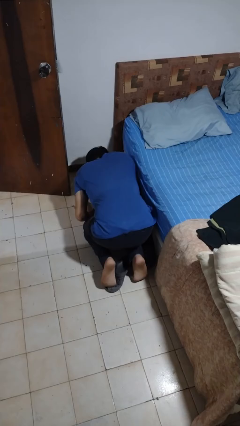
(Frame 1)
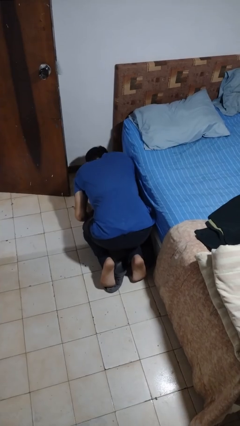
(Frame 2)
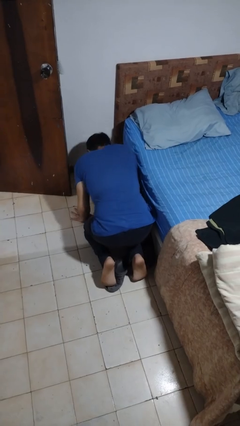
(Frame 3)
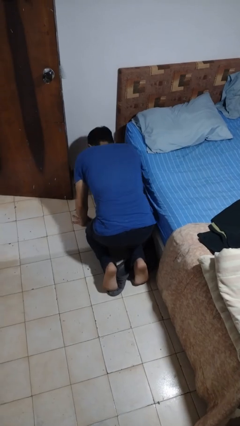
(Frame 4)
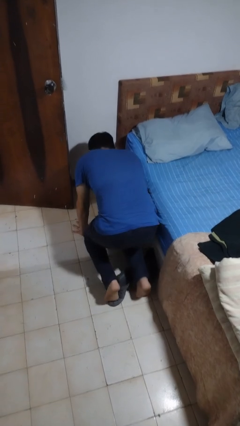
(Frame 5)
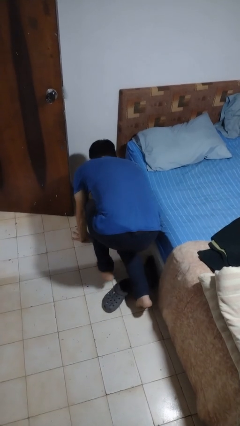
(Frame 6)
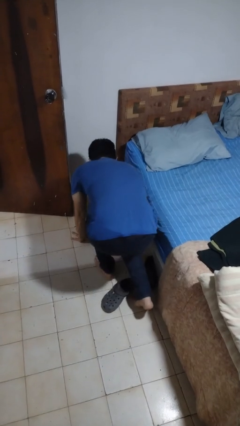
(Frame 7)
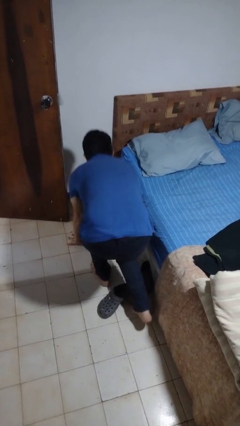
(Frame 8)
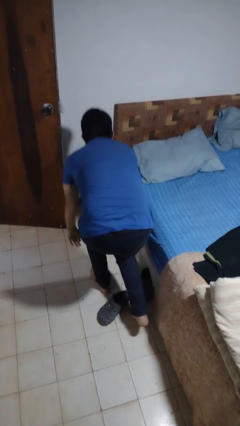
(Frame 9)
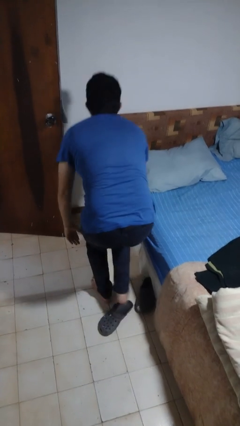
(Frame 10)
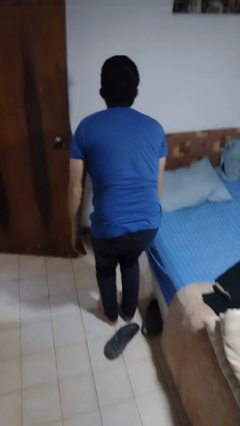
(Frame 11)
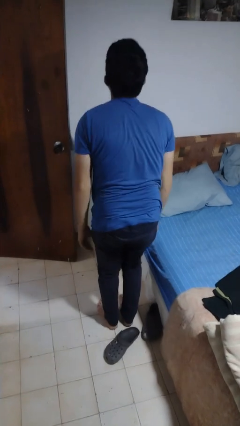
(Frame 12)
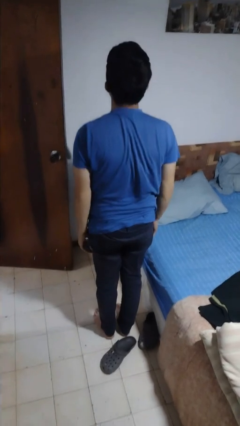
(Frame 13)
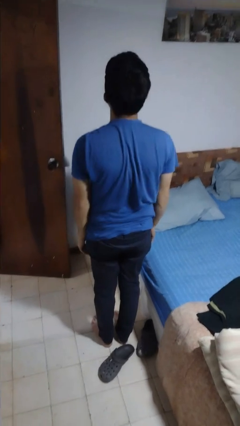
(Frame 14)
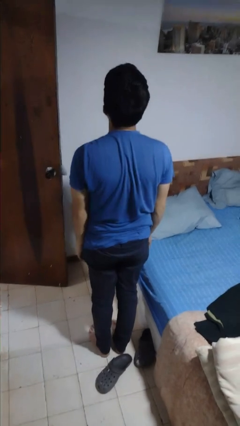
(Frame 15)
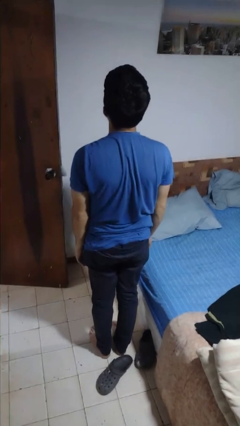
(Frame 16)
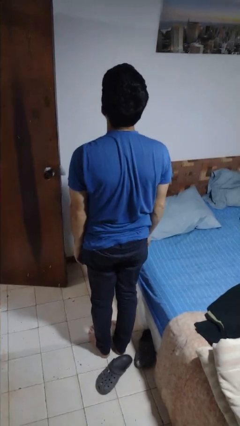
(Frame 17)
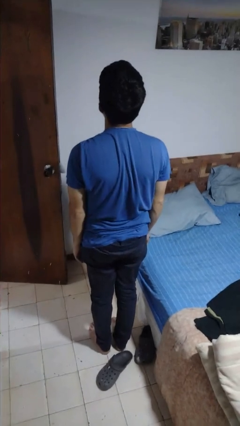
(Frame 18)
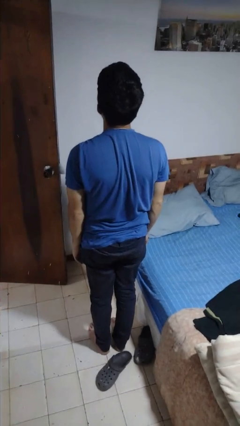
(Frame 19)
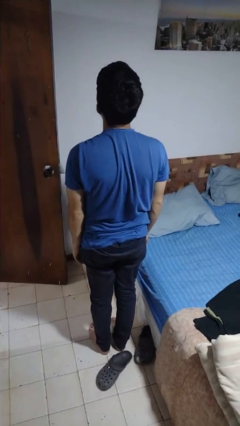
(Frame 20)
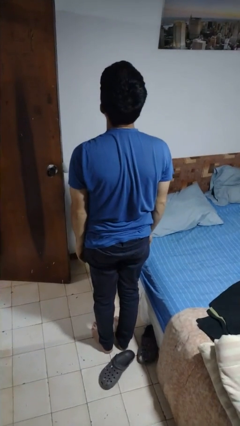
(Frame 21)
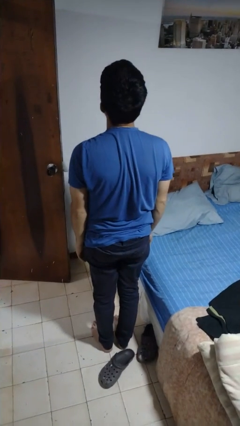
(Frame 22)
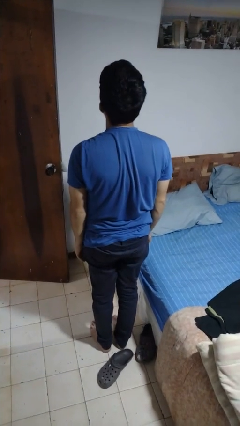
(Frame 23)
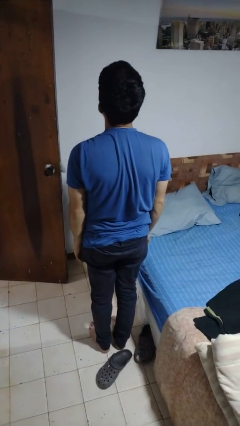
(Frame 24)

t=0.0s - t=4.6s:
person stands up from floor

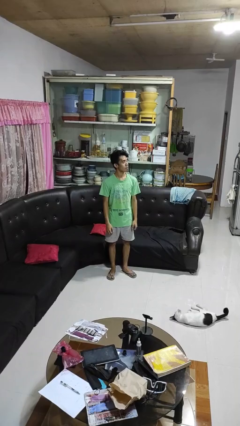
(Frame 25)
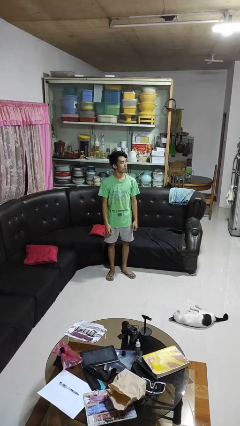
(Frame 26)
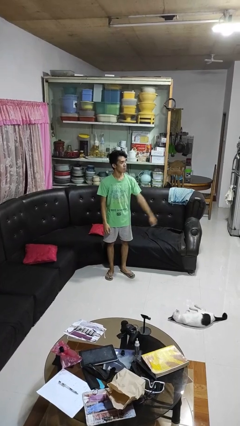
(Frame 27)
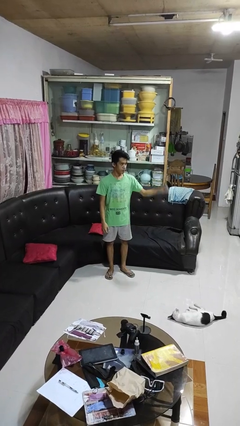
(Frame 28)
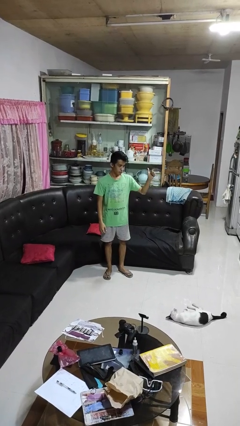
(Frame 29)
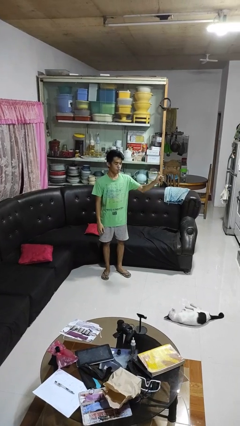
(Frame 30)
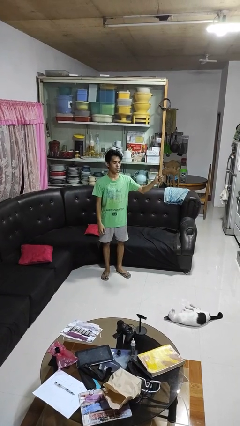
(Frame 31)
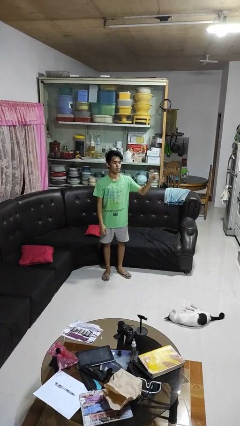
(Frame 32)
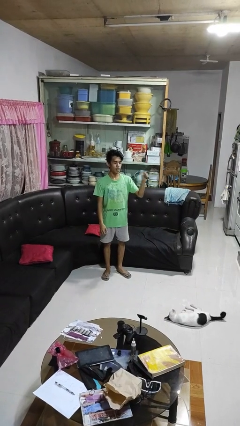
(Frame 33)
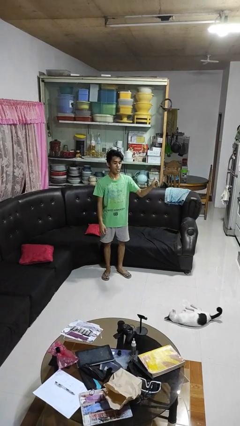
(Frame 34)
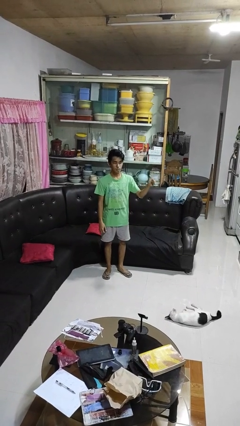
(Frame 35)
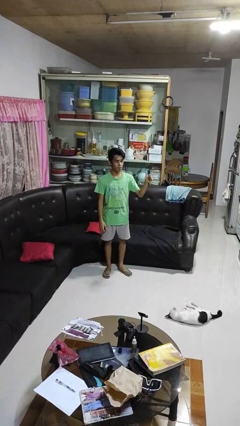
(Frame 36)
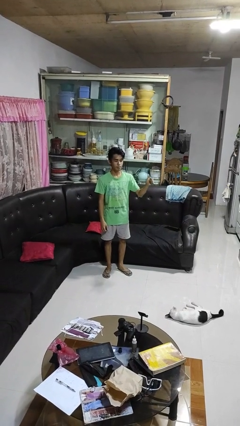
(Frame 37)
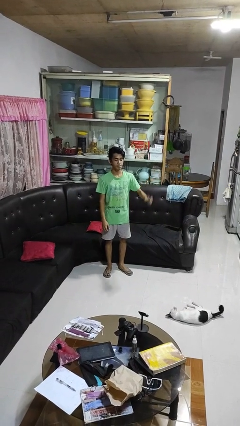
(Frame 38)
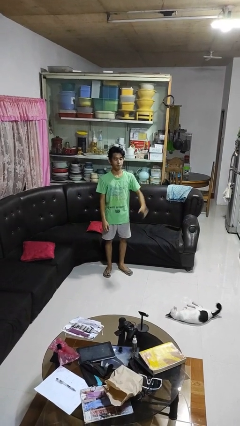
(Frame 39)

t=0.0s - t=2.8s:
person gestures thumbs up

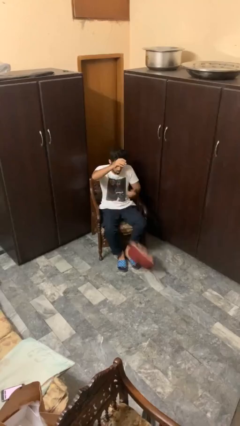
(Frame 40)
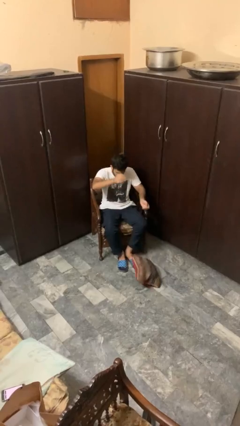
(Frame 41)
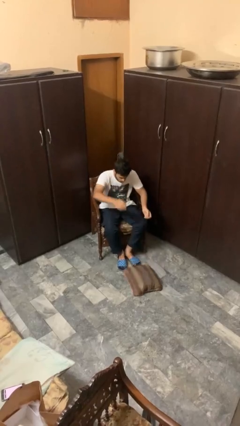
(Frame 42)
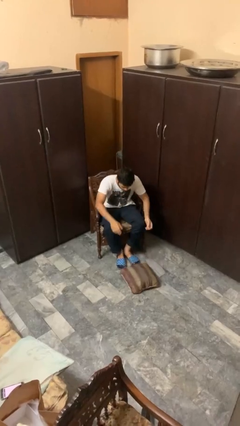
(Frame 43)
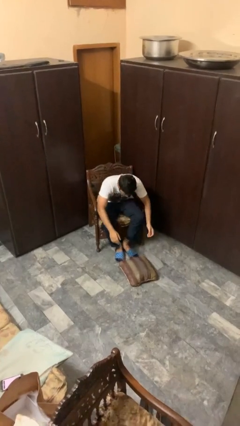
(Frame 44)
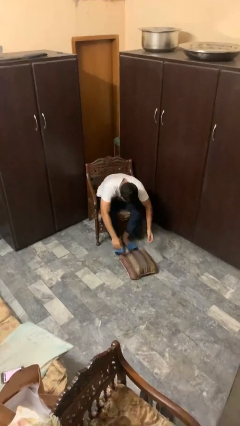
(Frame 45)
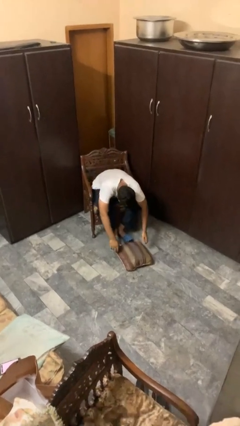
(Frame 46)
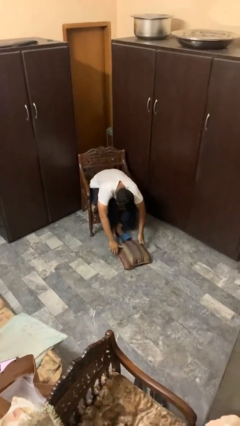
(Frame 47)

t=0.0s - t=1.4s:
person drops object

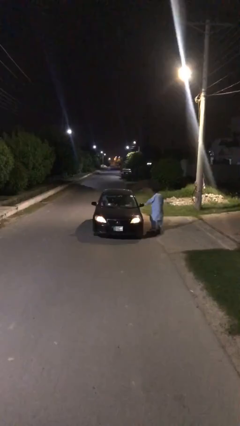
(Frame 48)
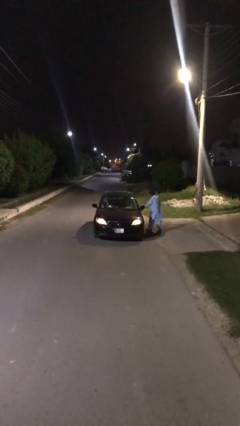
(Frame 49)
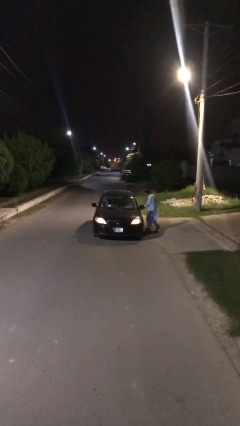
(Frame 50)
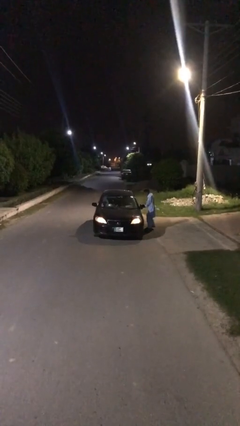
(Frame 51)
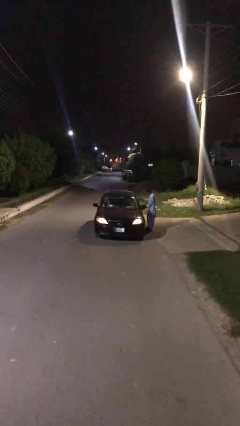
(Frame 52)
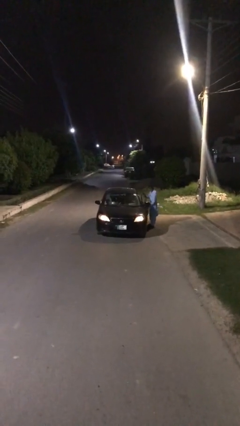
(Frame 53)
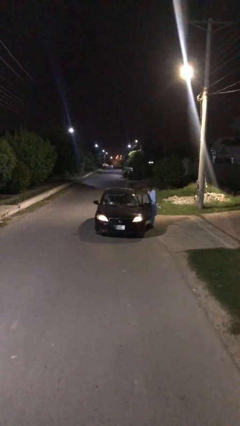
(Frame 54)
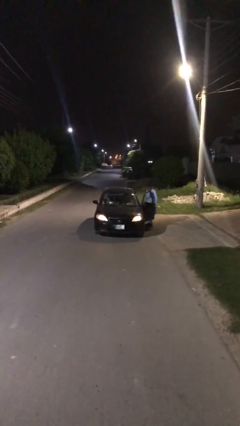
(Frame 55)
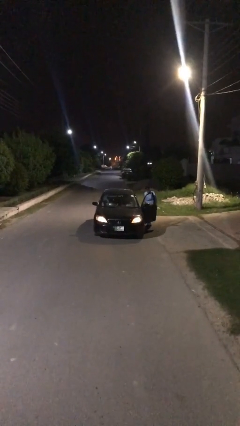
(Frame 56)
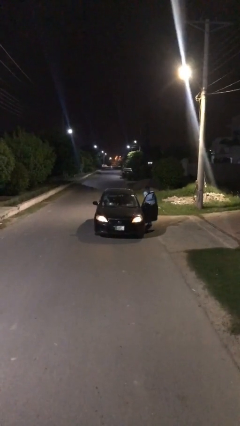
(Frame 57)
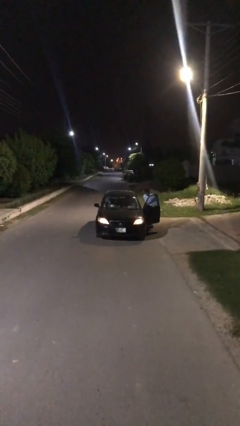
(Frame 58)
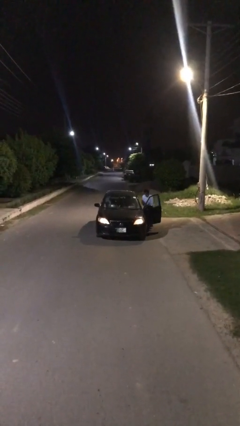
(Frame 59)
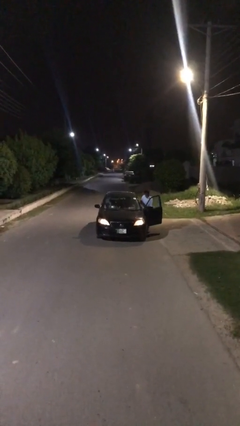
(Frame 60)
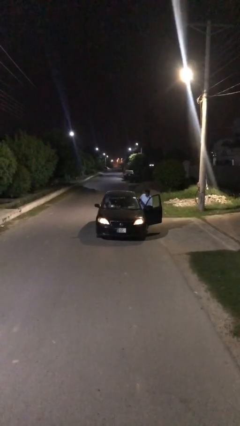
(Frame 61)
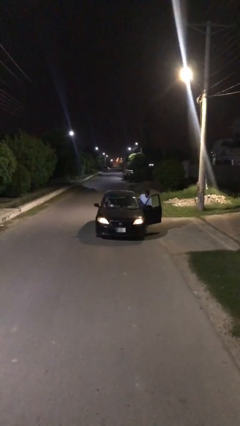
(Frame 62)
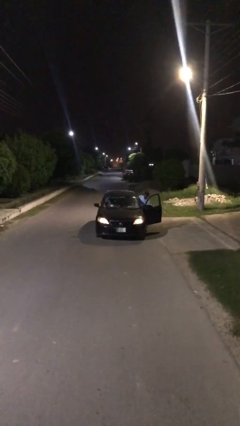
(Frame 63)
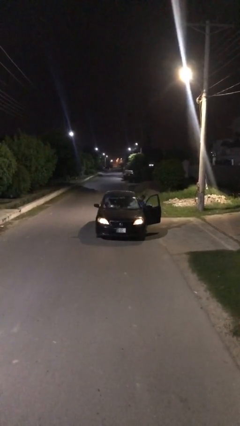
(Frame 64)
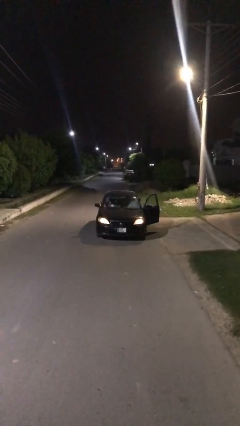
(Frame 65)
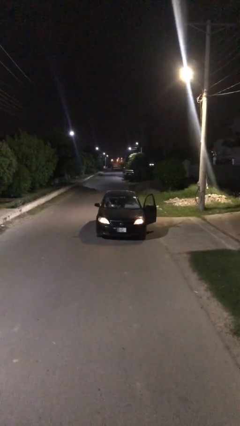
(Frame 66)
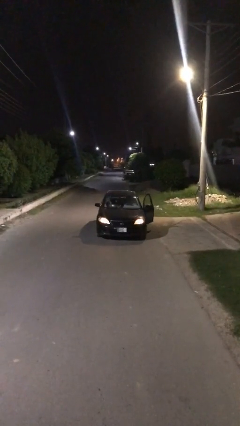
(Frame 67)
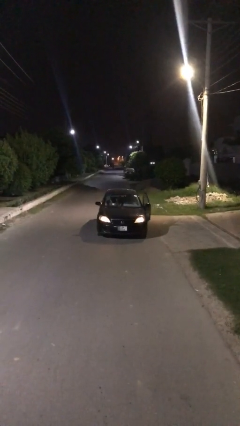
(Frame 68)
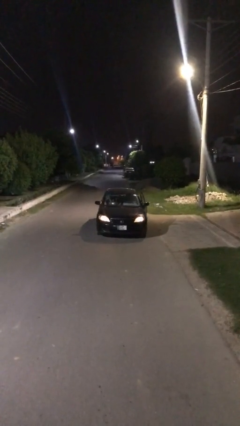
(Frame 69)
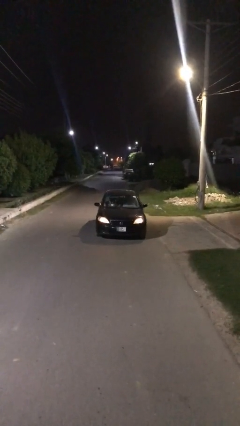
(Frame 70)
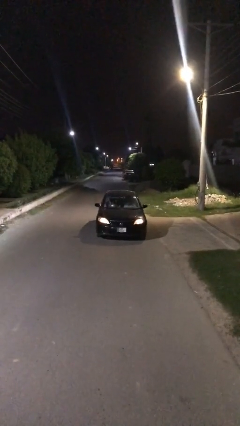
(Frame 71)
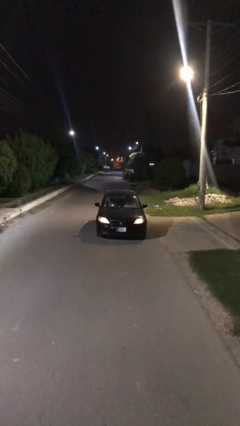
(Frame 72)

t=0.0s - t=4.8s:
car picks up person

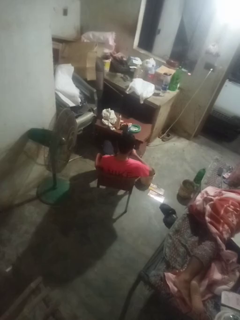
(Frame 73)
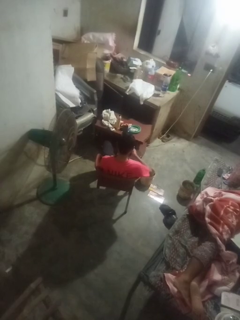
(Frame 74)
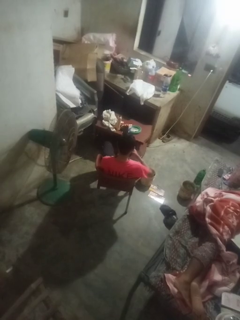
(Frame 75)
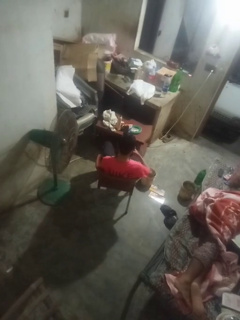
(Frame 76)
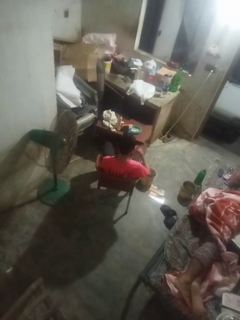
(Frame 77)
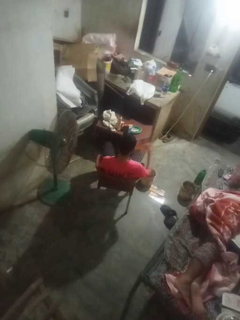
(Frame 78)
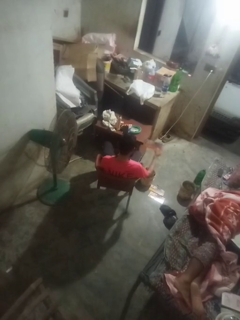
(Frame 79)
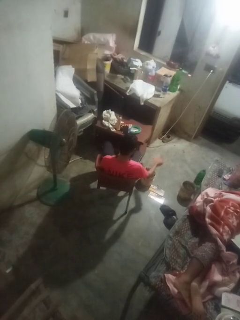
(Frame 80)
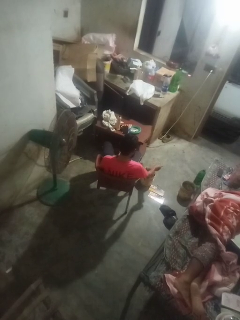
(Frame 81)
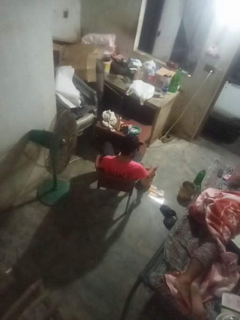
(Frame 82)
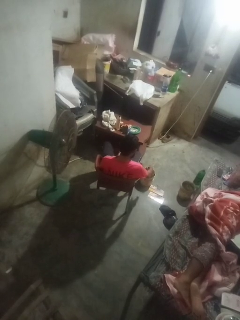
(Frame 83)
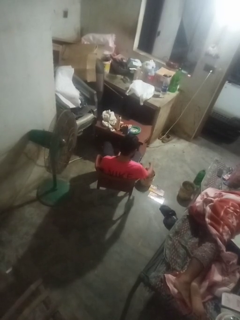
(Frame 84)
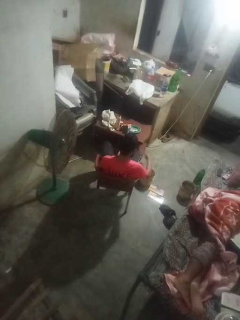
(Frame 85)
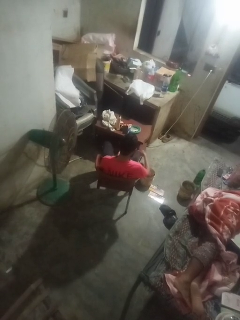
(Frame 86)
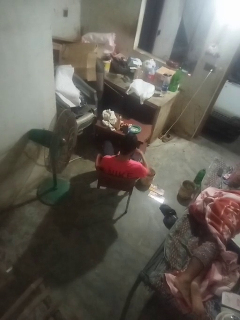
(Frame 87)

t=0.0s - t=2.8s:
person discards trash

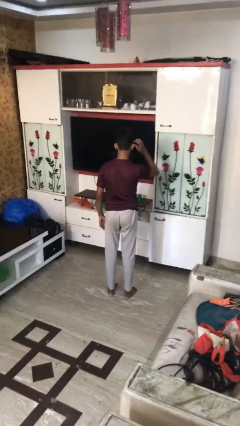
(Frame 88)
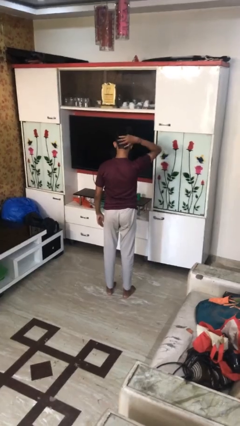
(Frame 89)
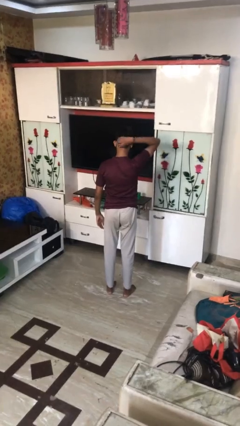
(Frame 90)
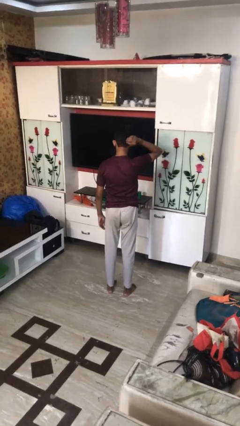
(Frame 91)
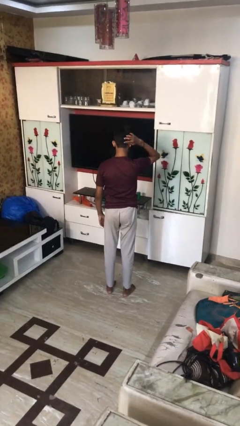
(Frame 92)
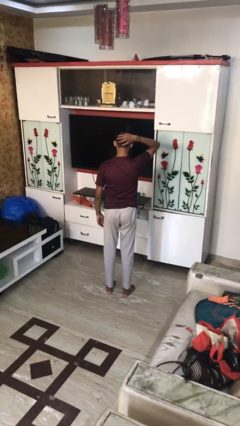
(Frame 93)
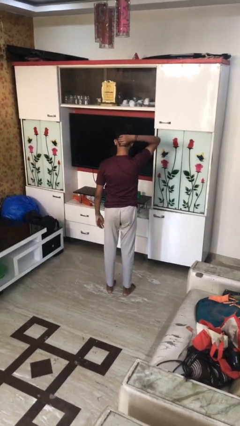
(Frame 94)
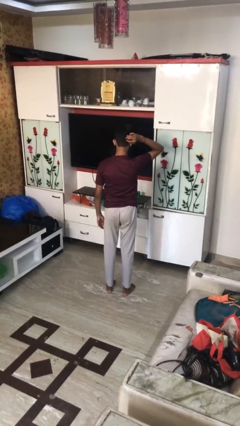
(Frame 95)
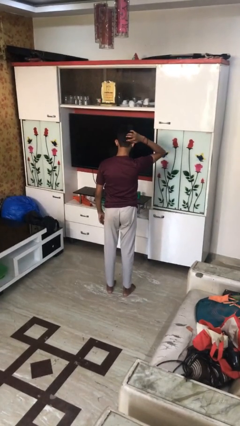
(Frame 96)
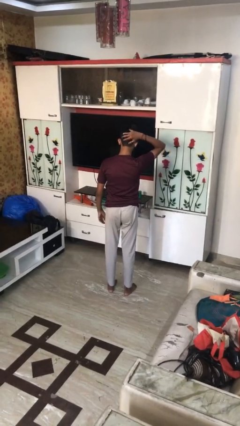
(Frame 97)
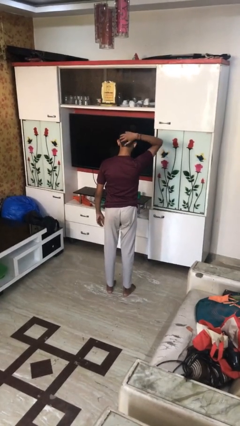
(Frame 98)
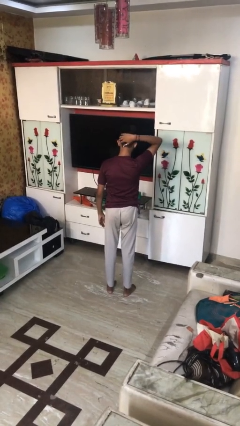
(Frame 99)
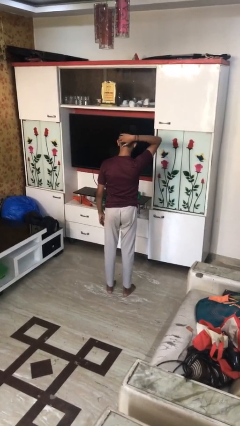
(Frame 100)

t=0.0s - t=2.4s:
person strokes hair
